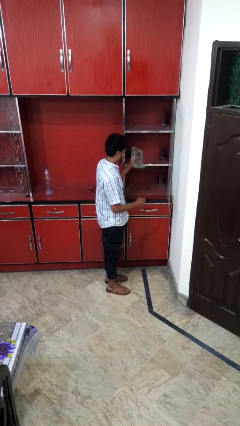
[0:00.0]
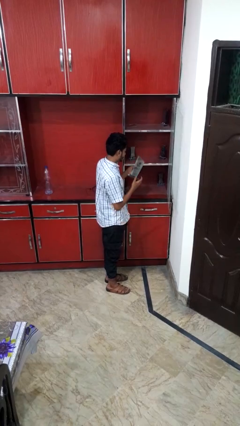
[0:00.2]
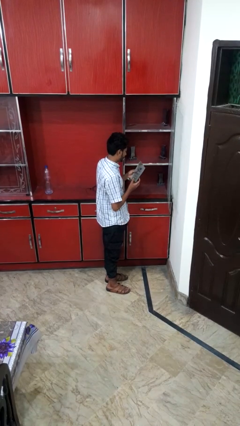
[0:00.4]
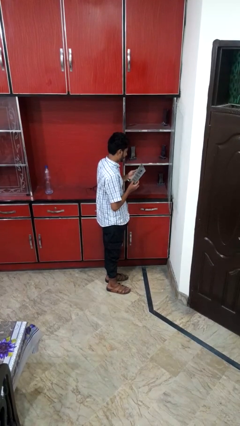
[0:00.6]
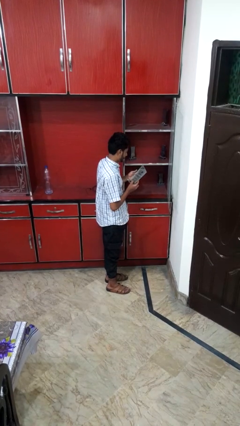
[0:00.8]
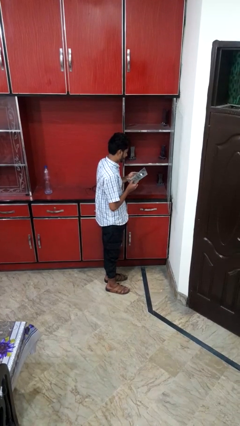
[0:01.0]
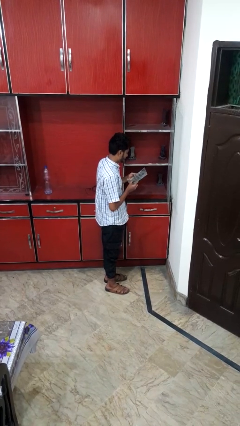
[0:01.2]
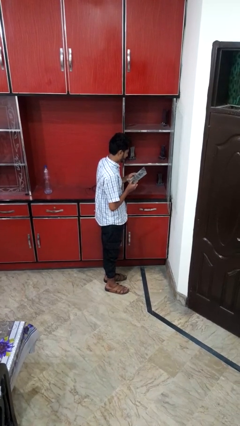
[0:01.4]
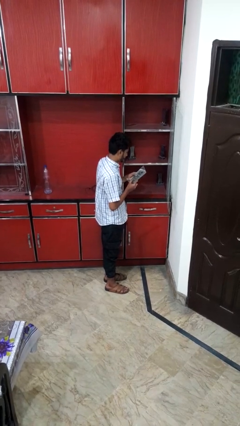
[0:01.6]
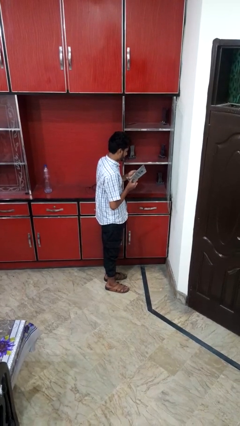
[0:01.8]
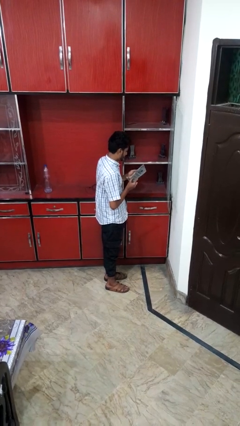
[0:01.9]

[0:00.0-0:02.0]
person picks up object from cabinet

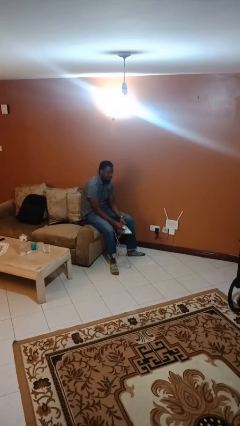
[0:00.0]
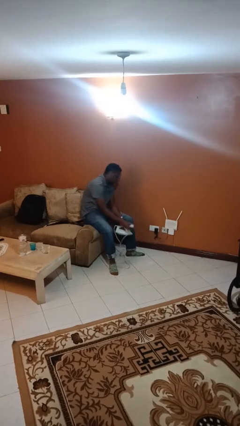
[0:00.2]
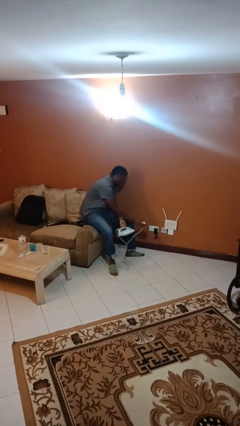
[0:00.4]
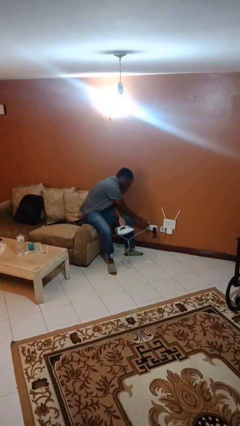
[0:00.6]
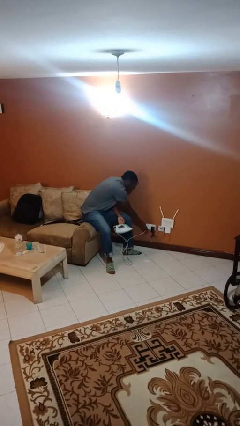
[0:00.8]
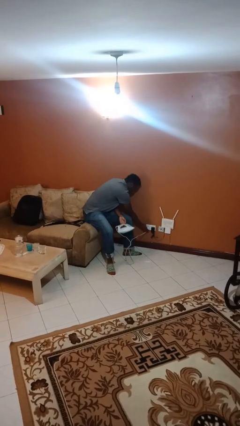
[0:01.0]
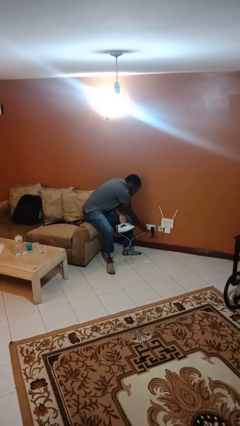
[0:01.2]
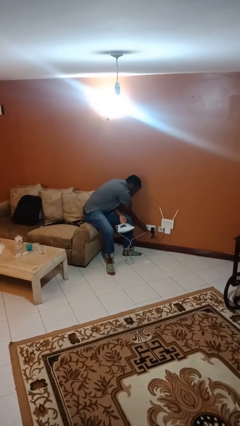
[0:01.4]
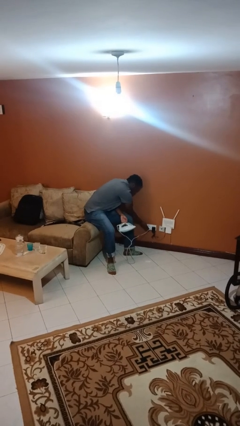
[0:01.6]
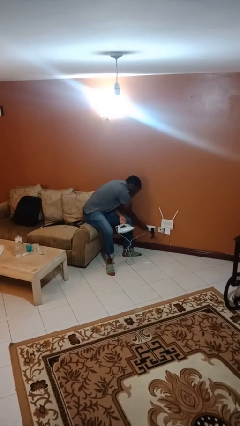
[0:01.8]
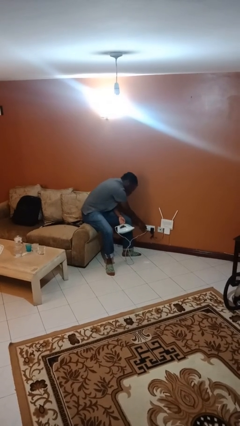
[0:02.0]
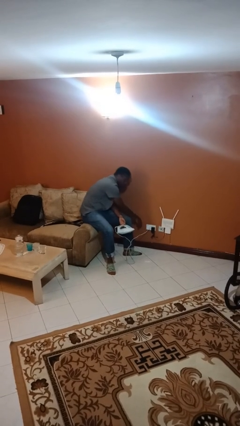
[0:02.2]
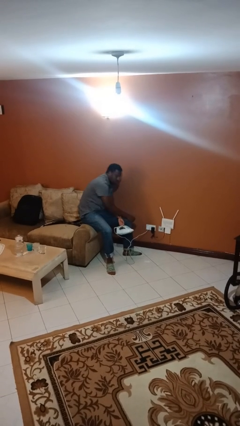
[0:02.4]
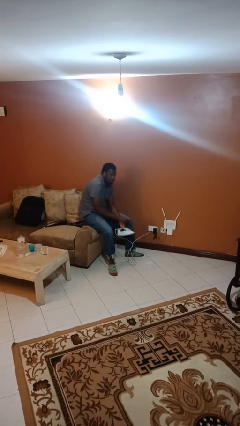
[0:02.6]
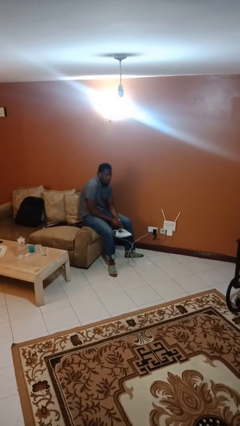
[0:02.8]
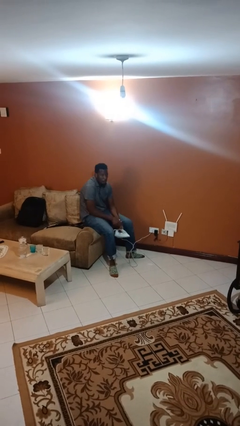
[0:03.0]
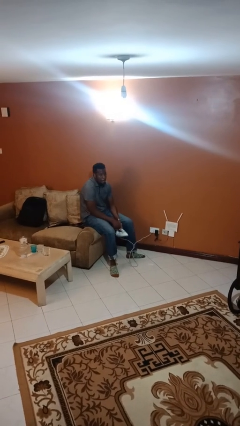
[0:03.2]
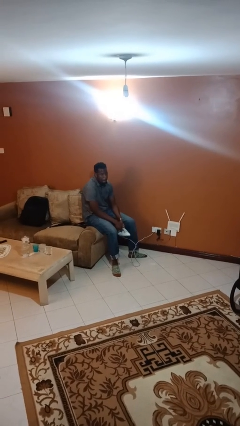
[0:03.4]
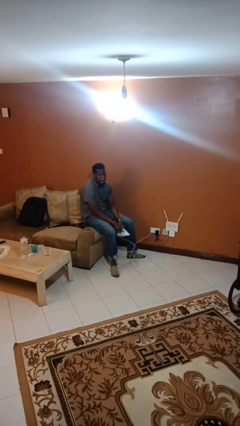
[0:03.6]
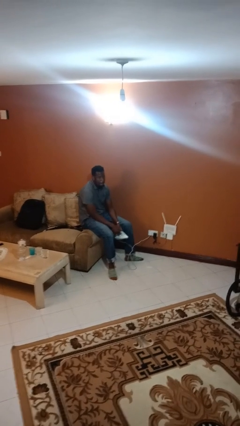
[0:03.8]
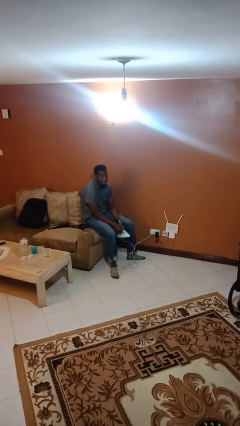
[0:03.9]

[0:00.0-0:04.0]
person plugs into electrical socket

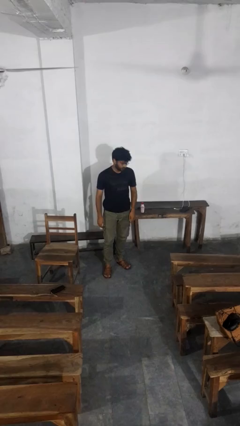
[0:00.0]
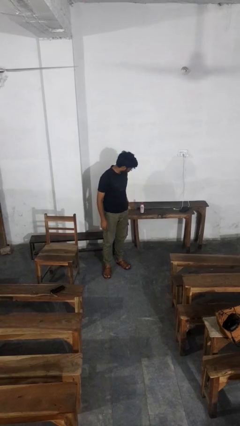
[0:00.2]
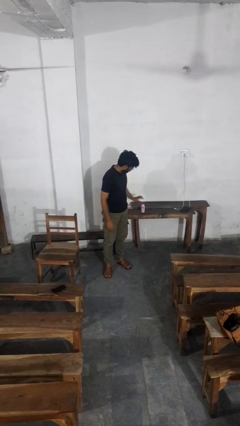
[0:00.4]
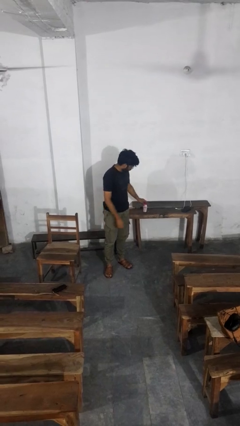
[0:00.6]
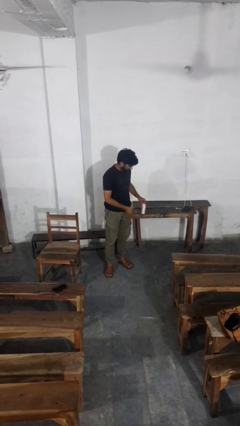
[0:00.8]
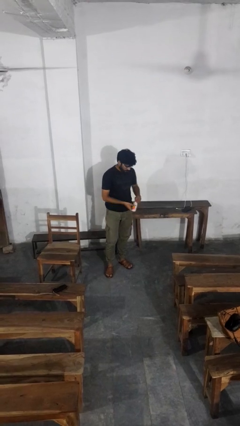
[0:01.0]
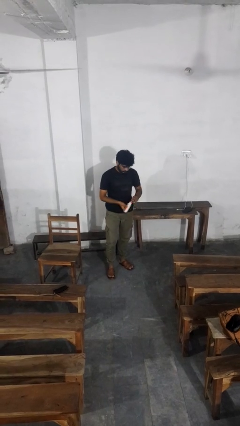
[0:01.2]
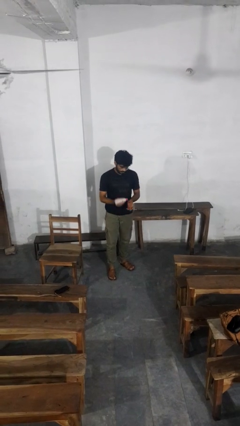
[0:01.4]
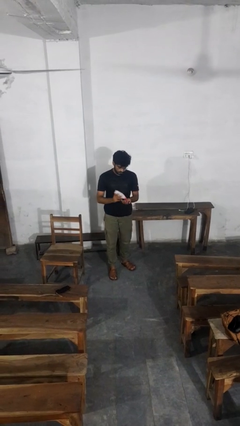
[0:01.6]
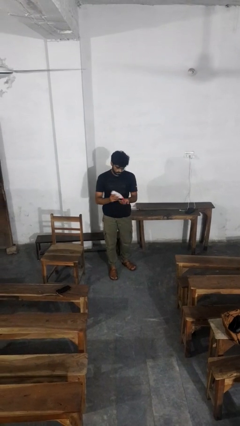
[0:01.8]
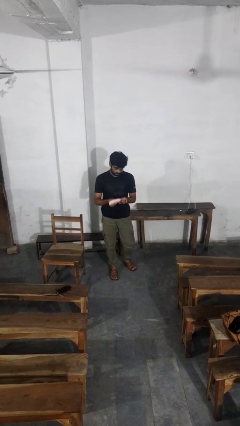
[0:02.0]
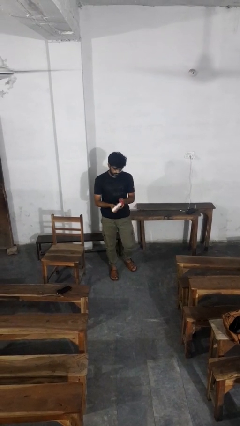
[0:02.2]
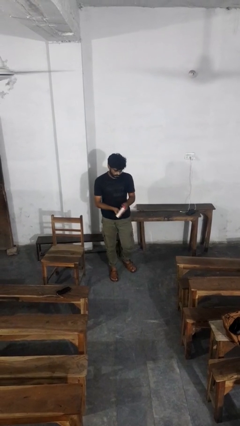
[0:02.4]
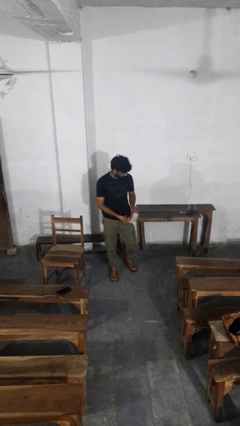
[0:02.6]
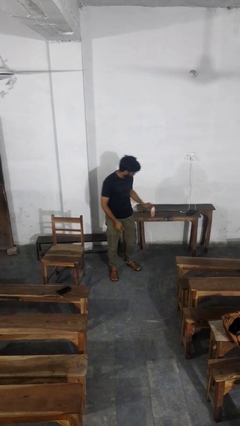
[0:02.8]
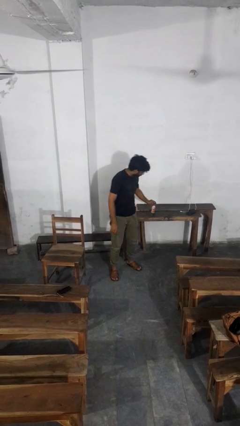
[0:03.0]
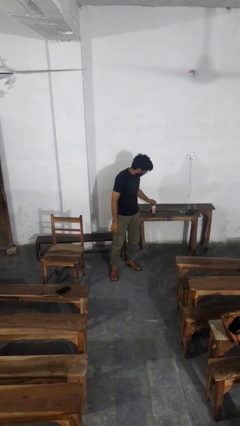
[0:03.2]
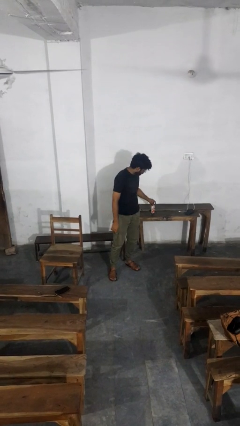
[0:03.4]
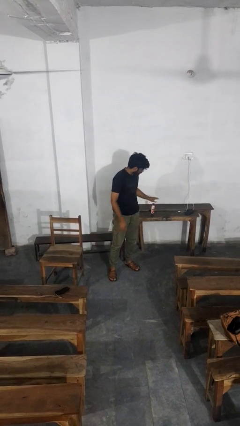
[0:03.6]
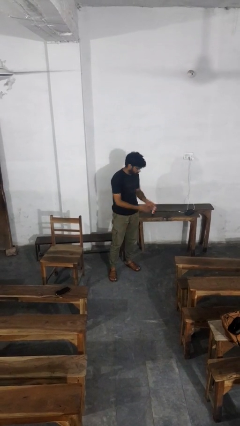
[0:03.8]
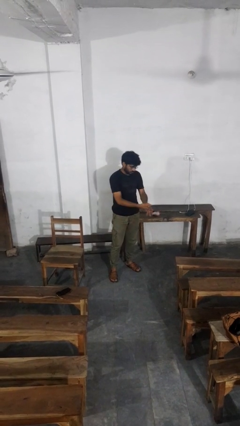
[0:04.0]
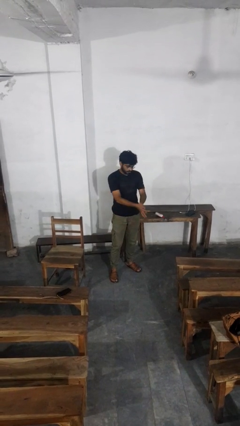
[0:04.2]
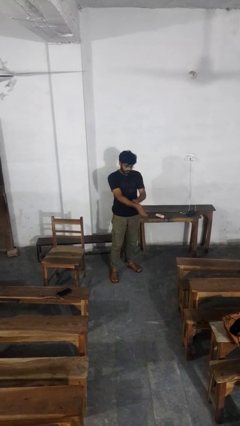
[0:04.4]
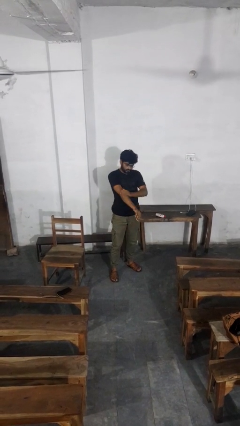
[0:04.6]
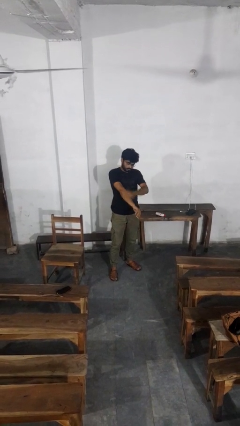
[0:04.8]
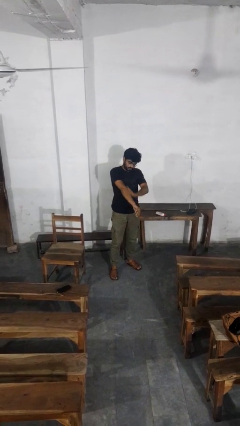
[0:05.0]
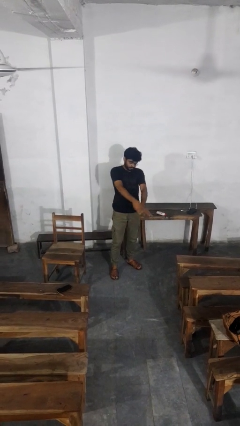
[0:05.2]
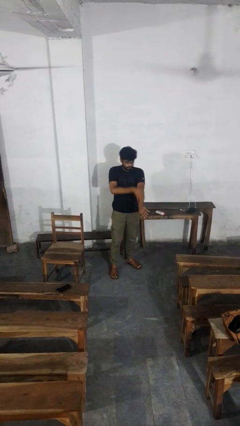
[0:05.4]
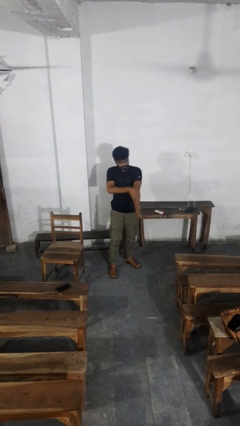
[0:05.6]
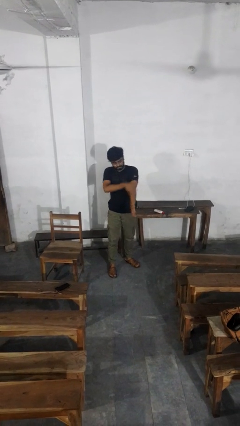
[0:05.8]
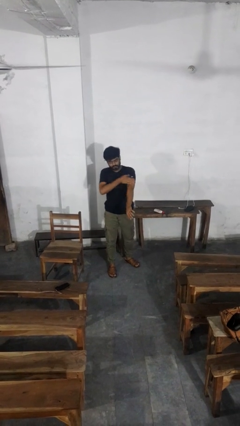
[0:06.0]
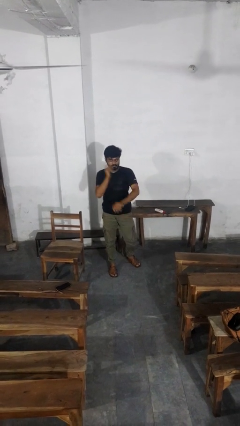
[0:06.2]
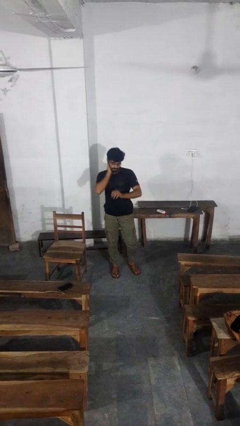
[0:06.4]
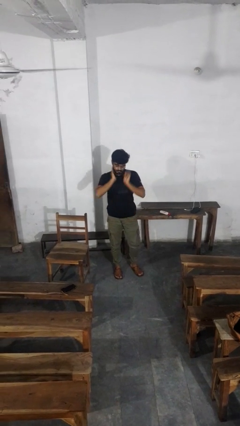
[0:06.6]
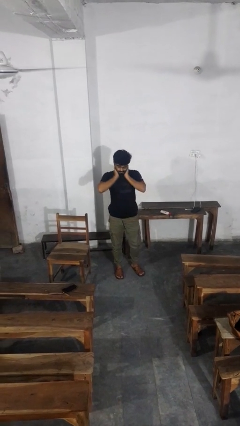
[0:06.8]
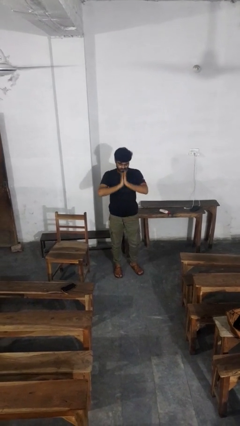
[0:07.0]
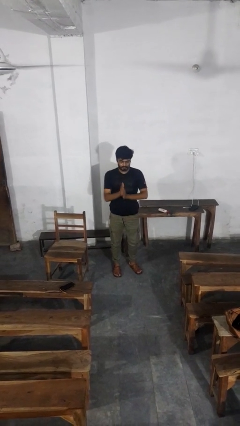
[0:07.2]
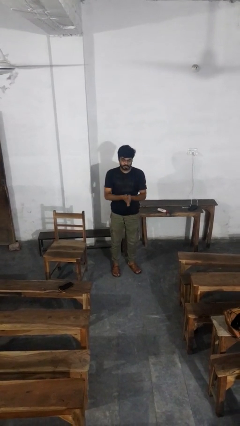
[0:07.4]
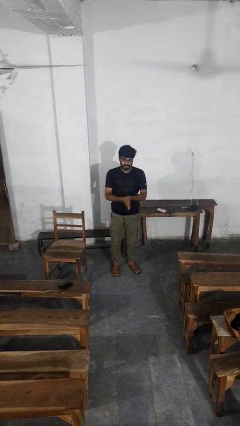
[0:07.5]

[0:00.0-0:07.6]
person applies sunscreen

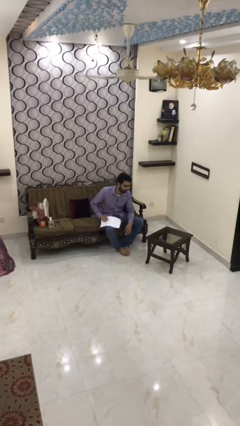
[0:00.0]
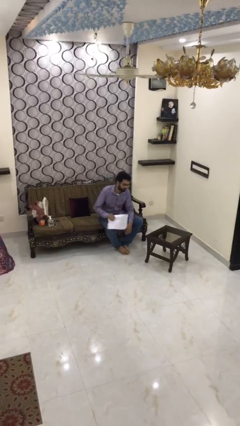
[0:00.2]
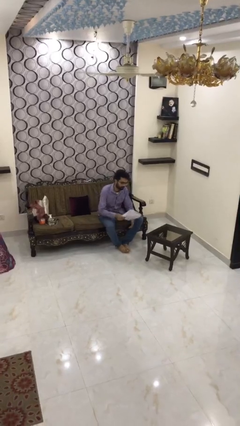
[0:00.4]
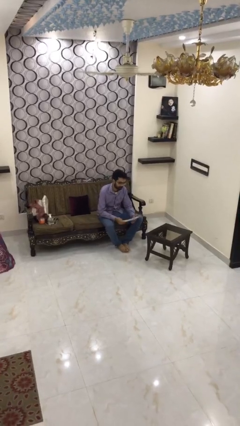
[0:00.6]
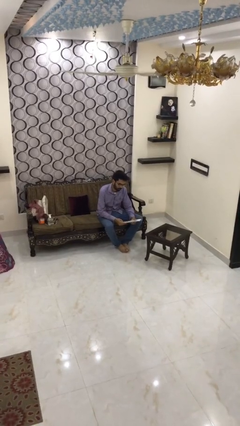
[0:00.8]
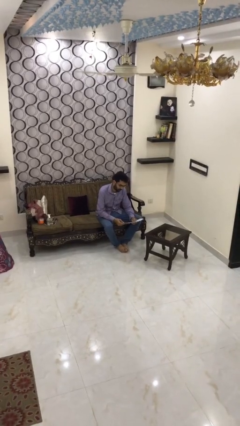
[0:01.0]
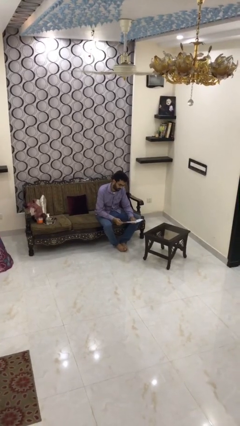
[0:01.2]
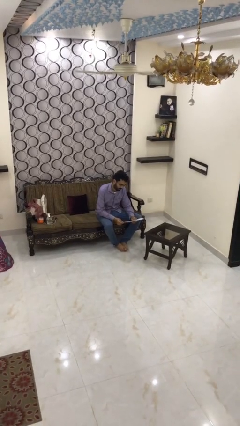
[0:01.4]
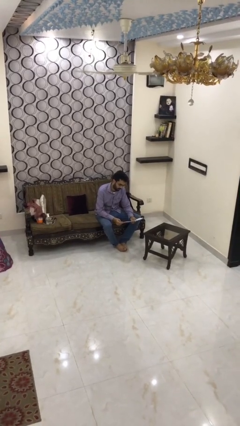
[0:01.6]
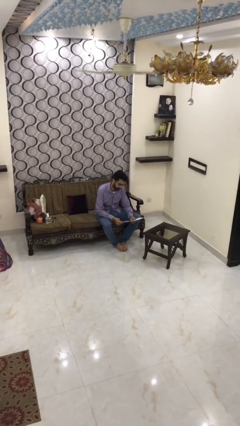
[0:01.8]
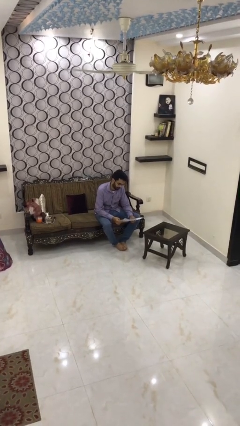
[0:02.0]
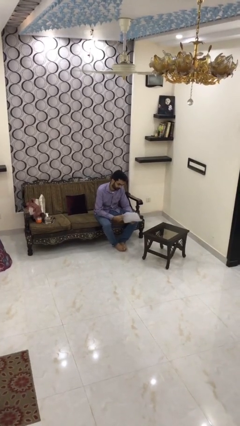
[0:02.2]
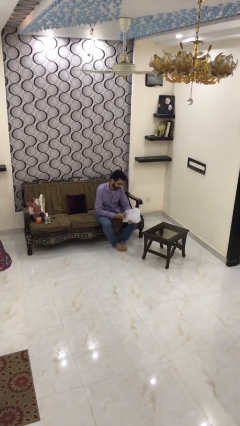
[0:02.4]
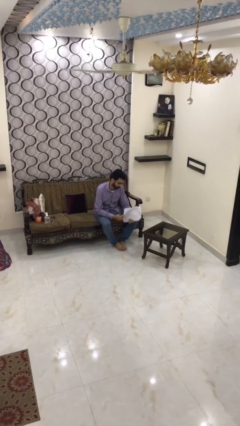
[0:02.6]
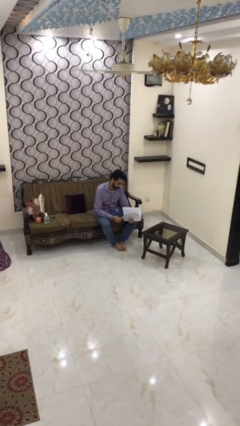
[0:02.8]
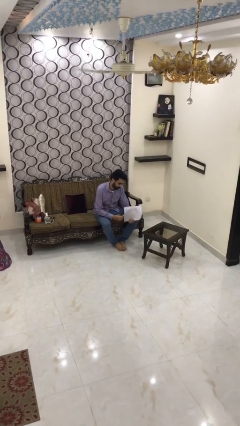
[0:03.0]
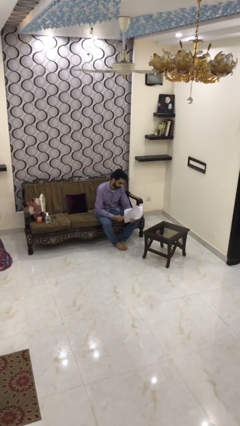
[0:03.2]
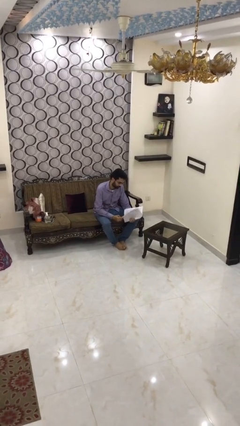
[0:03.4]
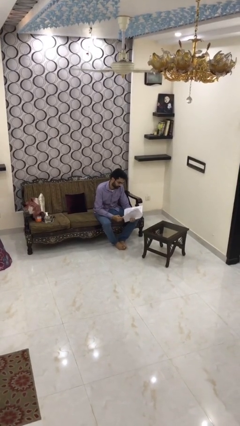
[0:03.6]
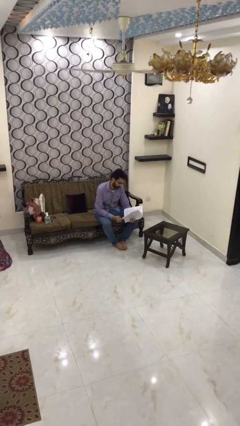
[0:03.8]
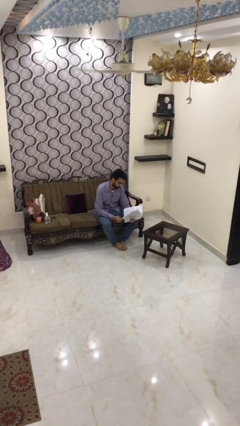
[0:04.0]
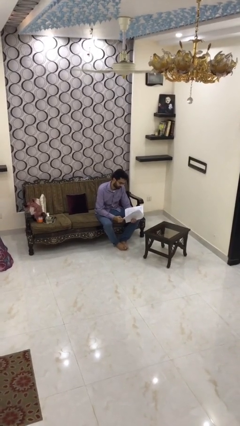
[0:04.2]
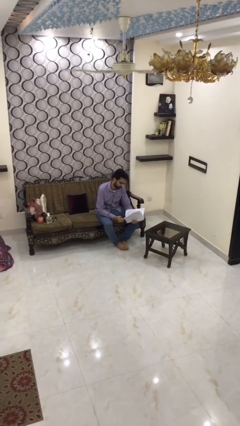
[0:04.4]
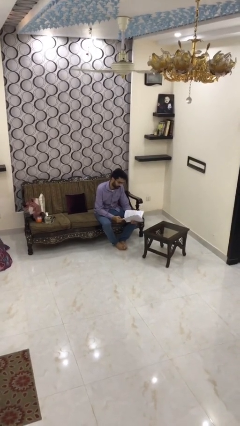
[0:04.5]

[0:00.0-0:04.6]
person reads document
